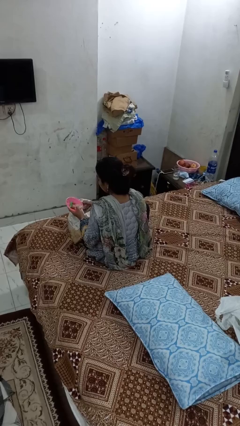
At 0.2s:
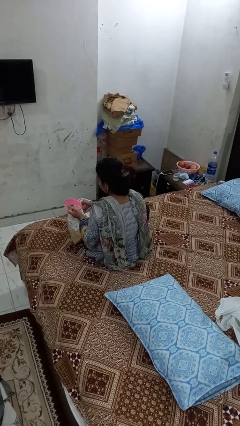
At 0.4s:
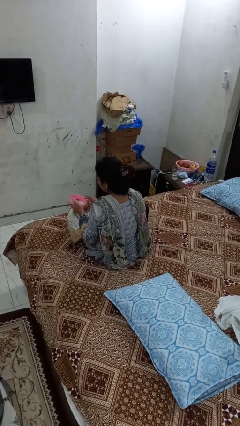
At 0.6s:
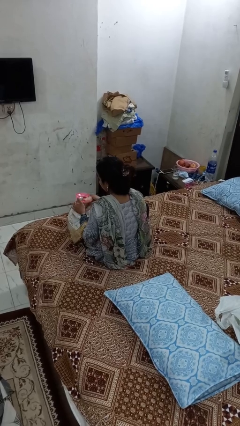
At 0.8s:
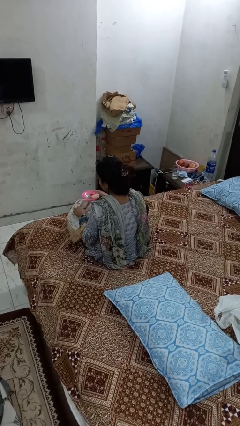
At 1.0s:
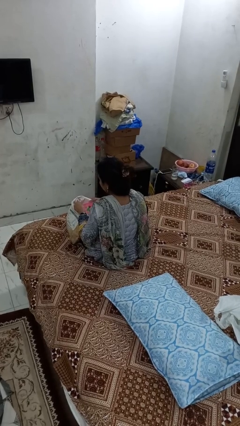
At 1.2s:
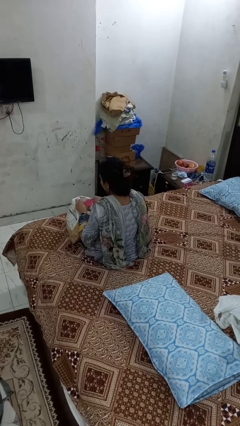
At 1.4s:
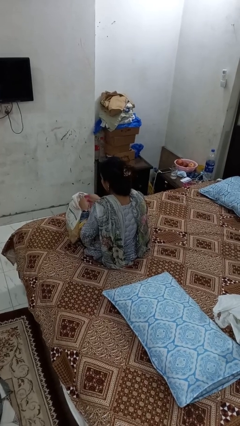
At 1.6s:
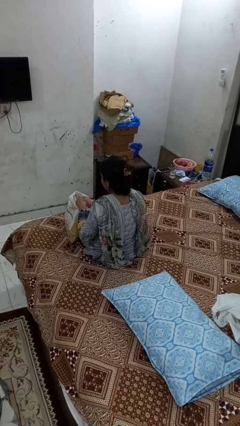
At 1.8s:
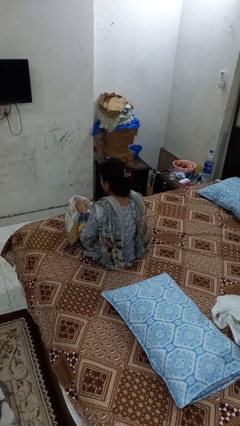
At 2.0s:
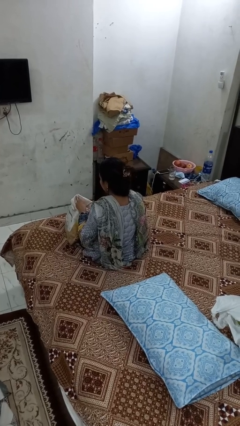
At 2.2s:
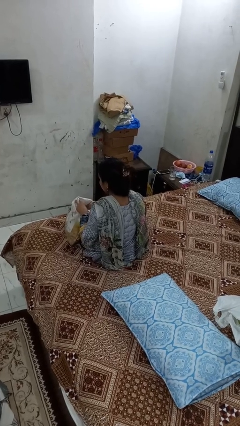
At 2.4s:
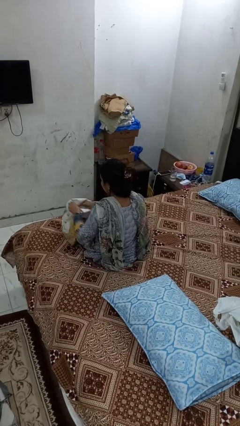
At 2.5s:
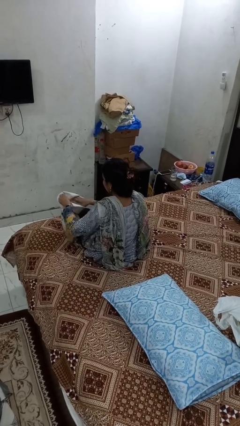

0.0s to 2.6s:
person puts object into bag

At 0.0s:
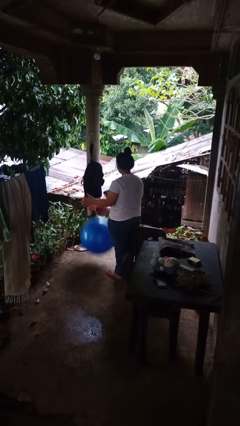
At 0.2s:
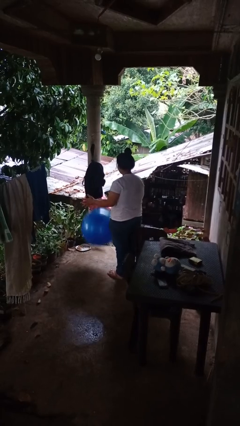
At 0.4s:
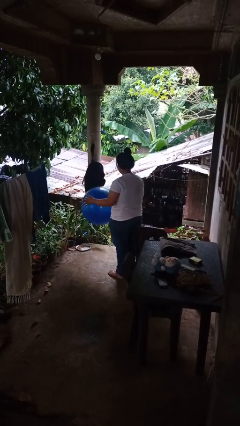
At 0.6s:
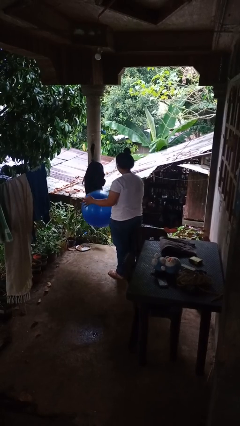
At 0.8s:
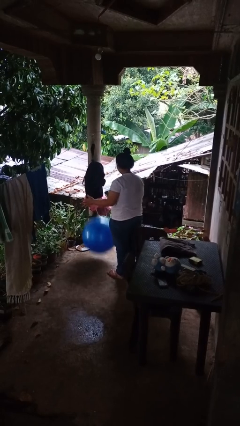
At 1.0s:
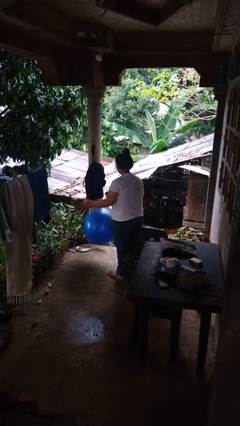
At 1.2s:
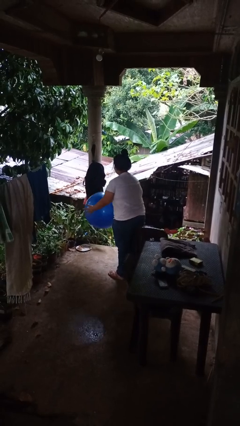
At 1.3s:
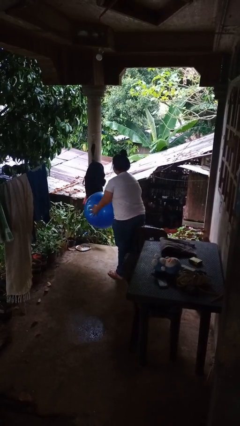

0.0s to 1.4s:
person bounces ball on floor

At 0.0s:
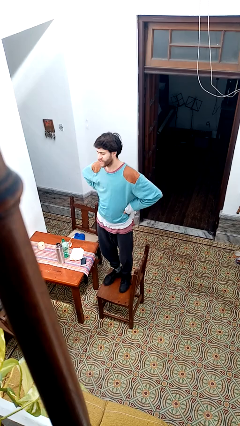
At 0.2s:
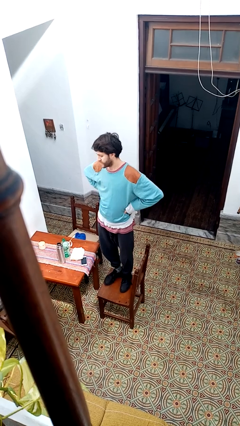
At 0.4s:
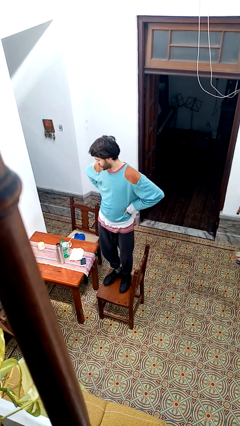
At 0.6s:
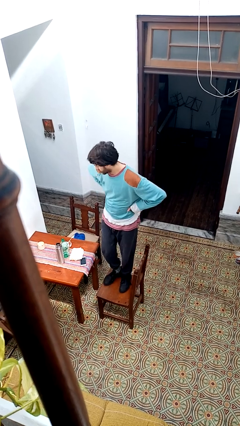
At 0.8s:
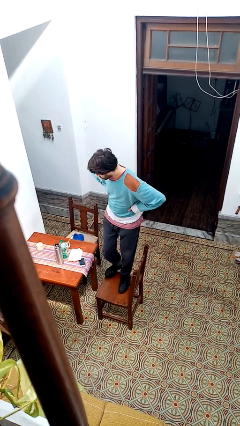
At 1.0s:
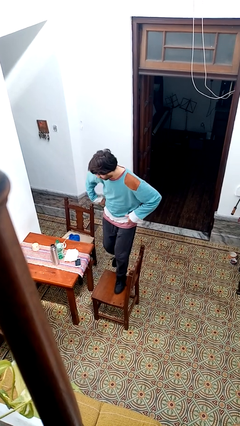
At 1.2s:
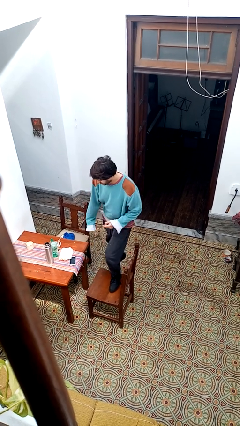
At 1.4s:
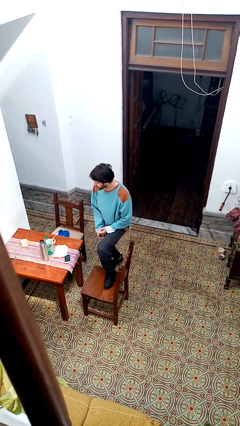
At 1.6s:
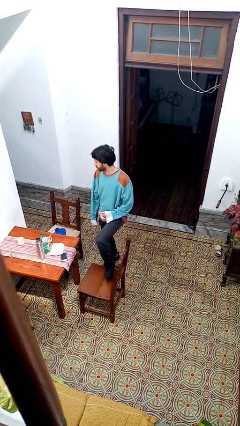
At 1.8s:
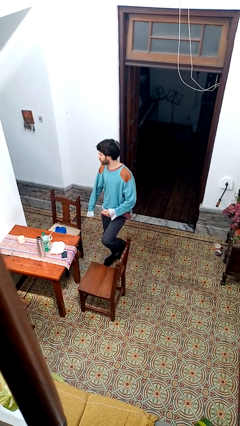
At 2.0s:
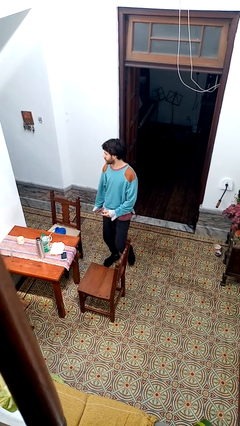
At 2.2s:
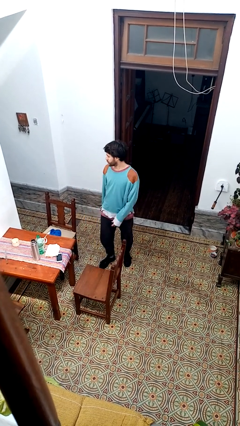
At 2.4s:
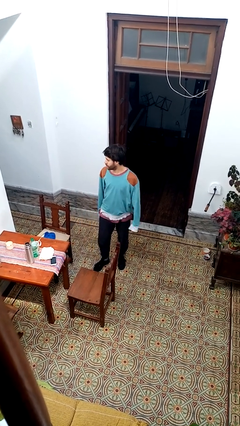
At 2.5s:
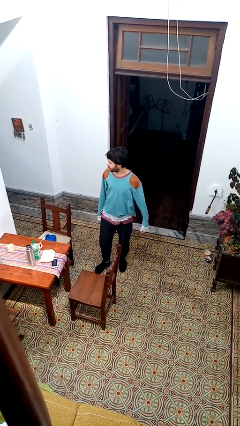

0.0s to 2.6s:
person climbs off chair

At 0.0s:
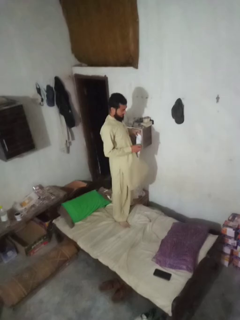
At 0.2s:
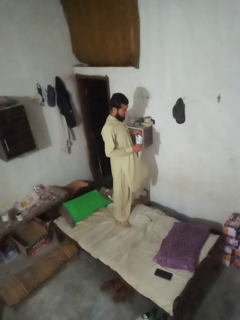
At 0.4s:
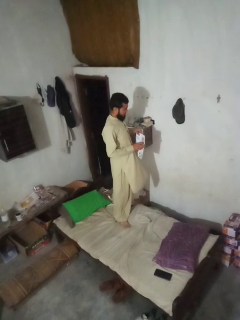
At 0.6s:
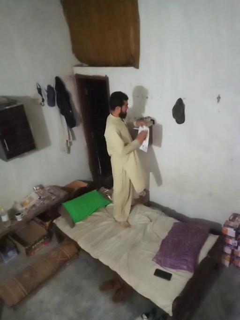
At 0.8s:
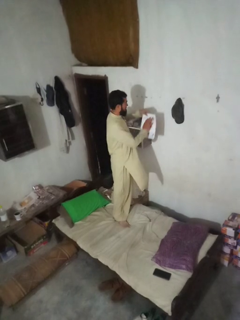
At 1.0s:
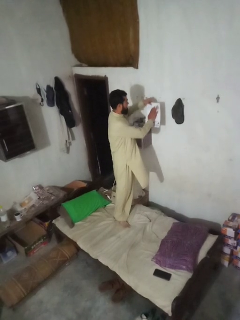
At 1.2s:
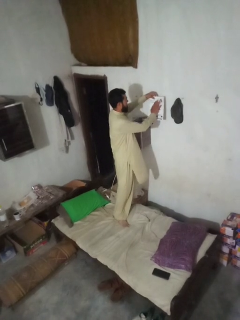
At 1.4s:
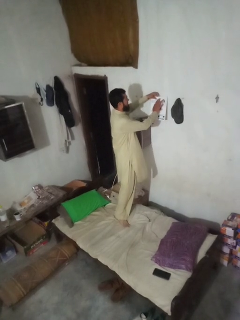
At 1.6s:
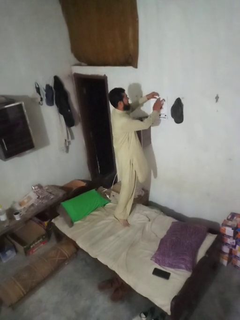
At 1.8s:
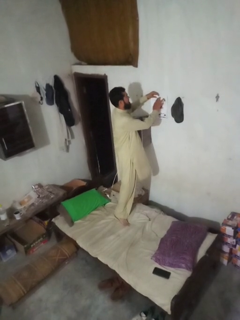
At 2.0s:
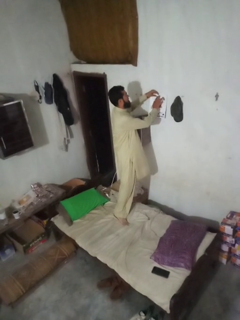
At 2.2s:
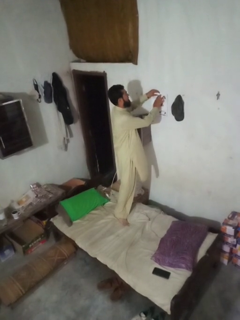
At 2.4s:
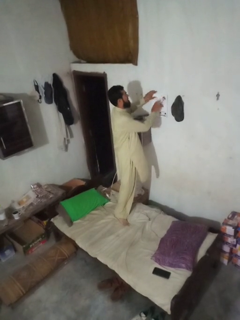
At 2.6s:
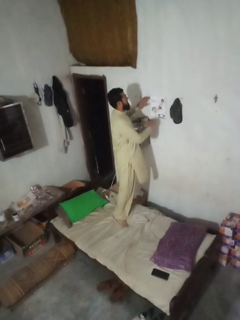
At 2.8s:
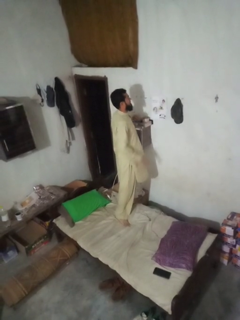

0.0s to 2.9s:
person puts up picture frame

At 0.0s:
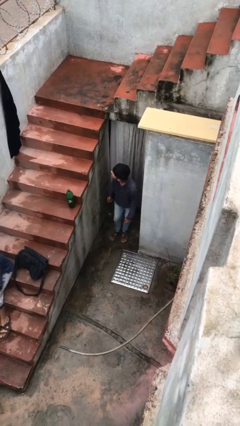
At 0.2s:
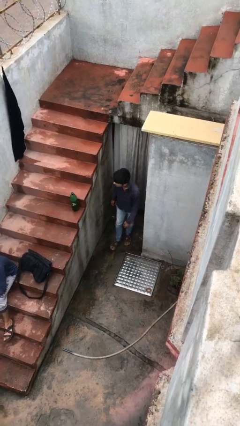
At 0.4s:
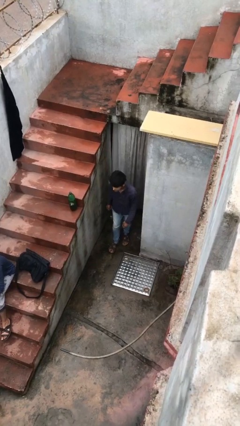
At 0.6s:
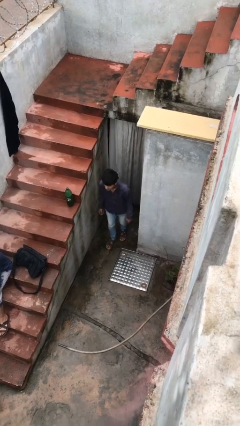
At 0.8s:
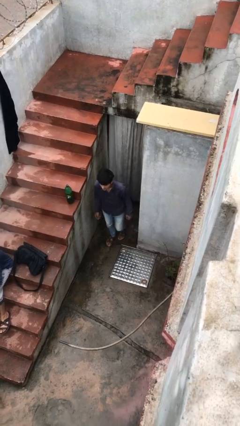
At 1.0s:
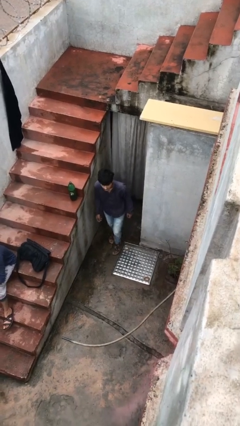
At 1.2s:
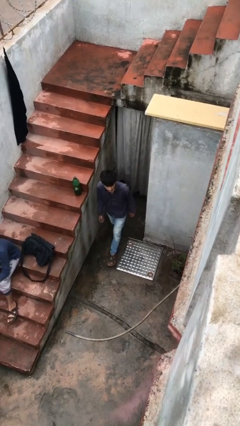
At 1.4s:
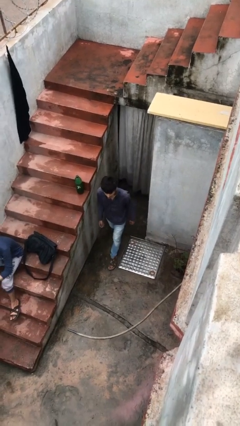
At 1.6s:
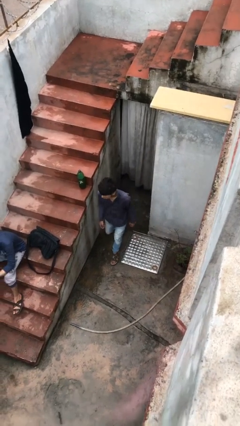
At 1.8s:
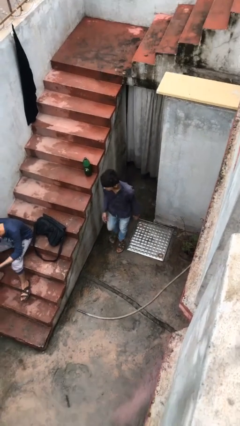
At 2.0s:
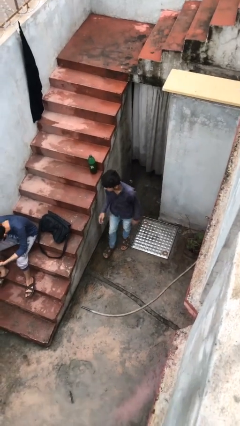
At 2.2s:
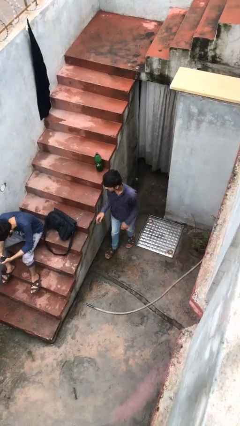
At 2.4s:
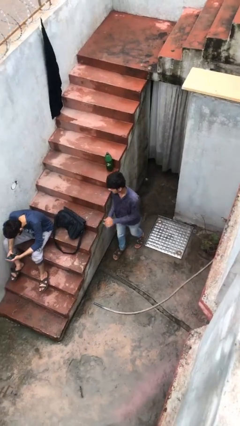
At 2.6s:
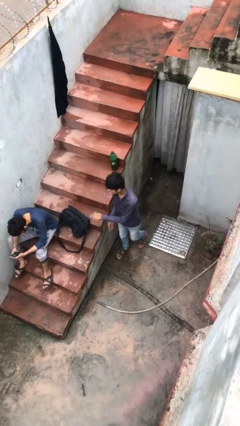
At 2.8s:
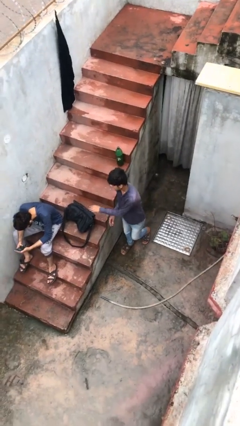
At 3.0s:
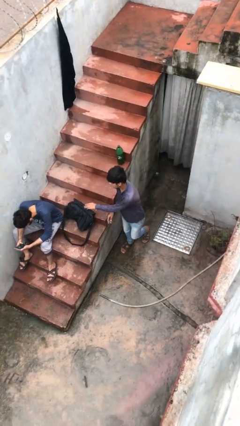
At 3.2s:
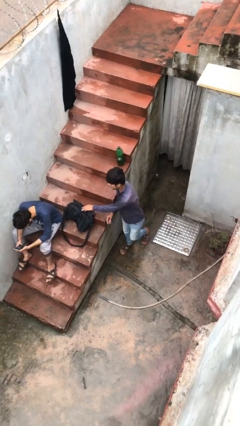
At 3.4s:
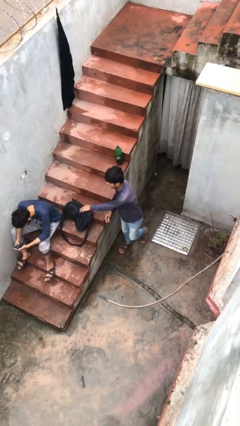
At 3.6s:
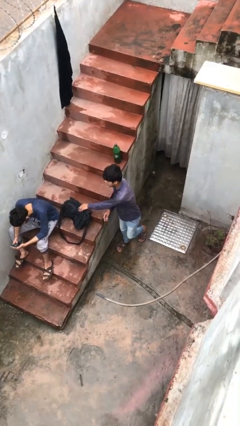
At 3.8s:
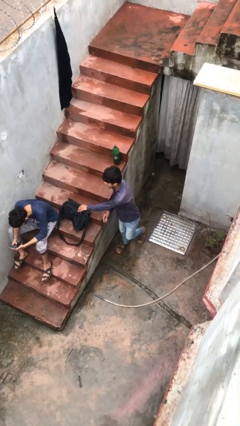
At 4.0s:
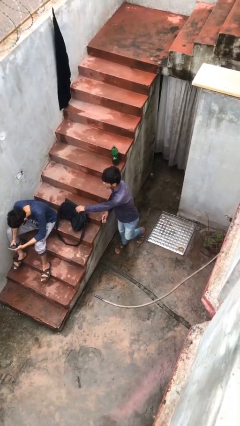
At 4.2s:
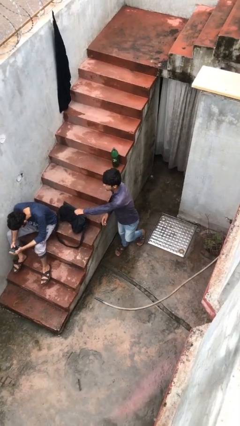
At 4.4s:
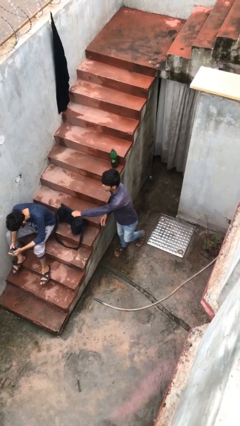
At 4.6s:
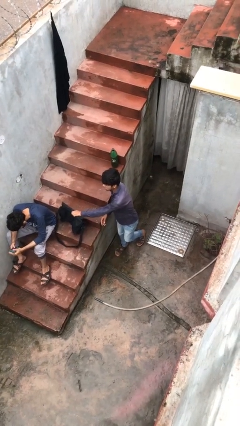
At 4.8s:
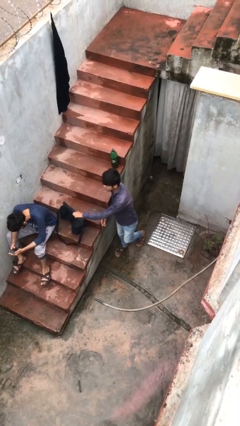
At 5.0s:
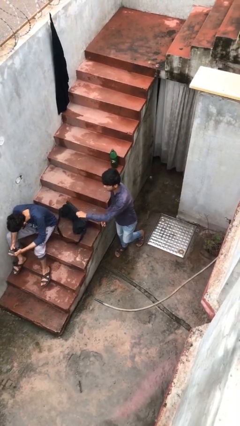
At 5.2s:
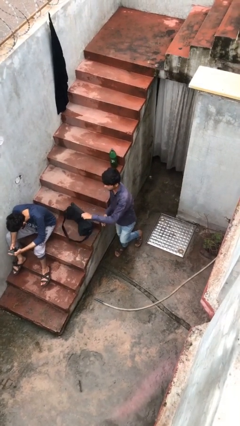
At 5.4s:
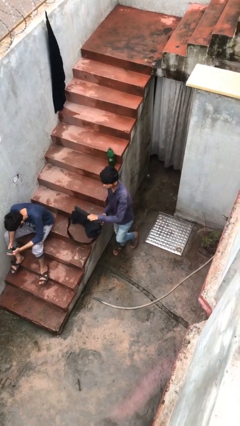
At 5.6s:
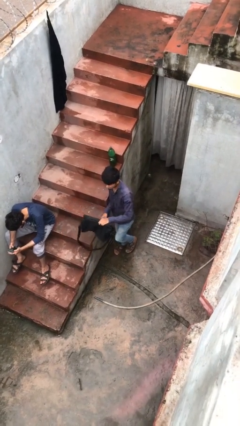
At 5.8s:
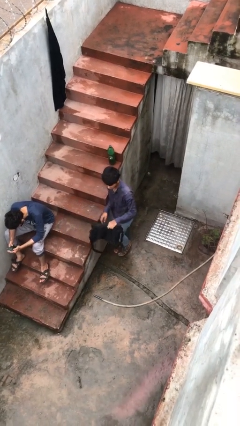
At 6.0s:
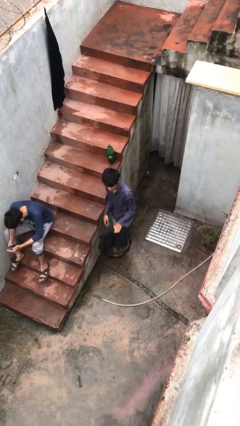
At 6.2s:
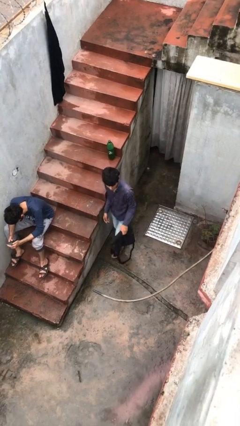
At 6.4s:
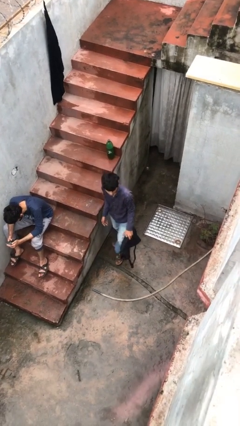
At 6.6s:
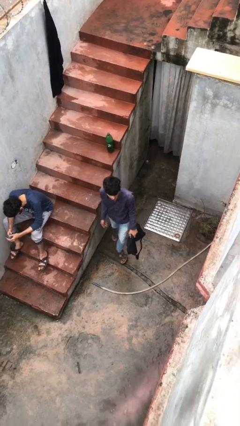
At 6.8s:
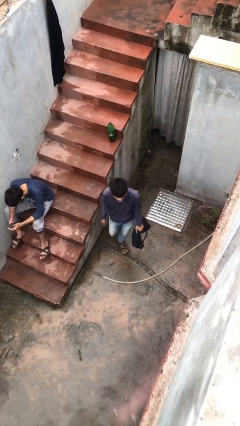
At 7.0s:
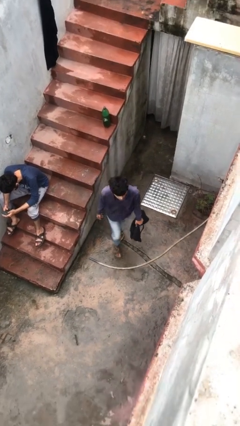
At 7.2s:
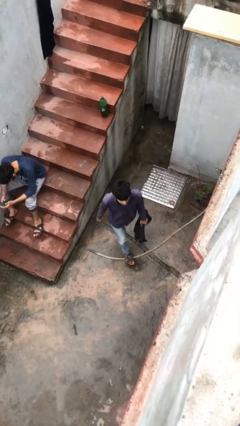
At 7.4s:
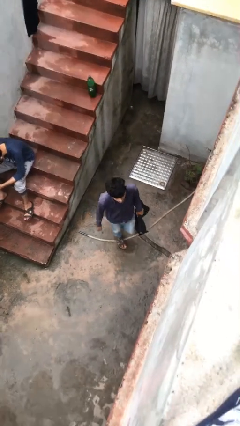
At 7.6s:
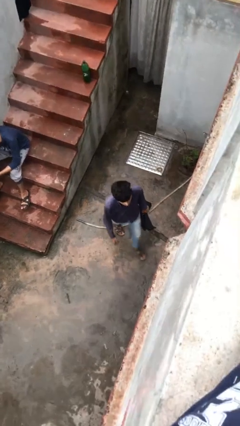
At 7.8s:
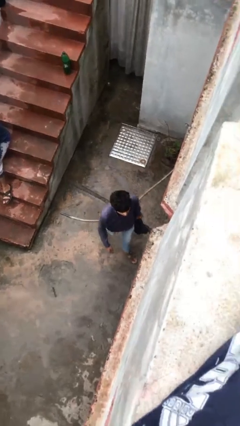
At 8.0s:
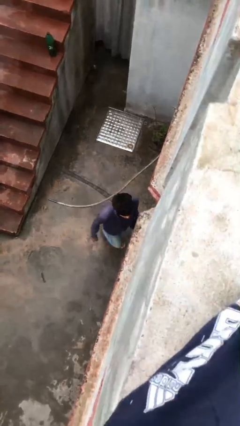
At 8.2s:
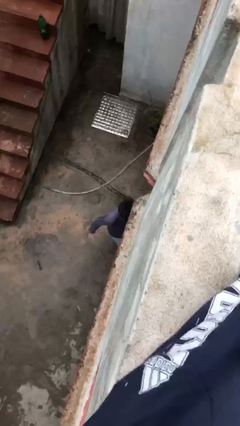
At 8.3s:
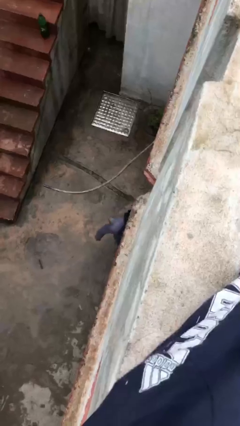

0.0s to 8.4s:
person steals object from person
